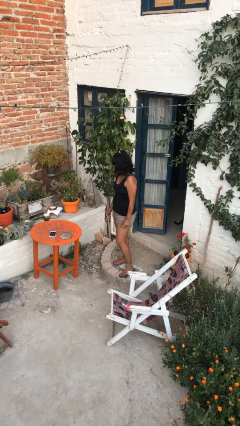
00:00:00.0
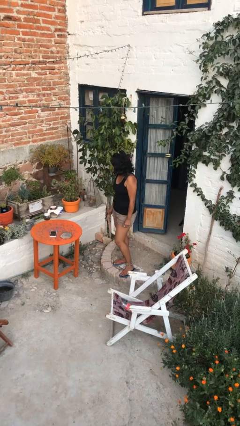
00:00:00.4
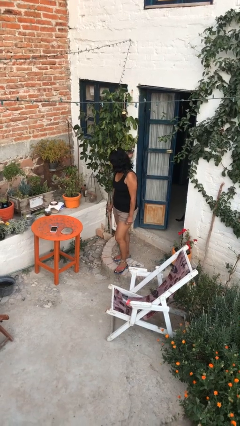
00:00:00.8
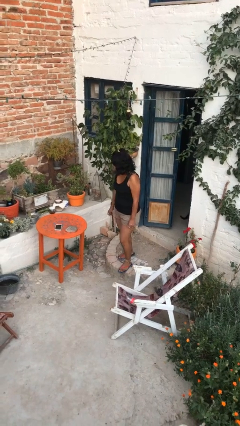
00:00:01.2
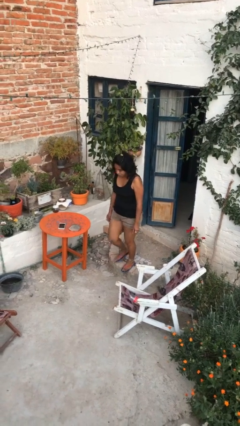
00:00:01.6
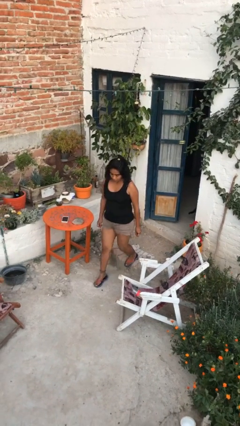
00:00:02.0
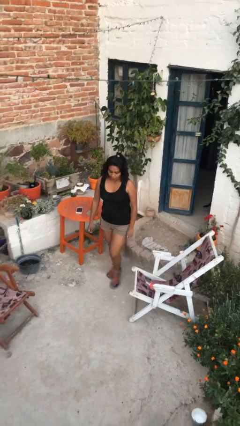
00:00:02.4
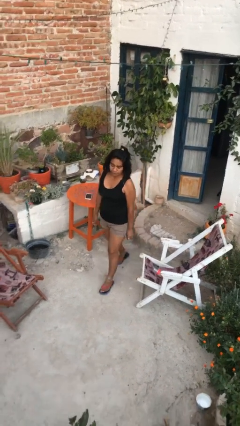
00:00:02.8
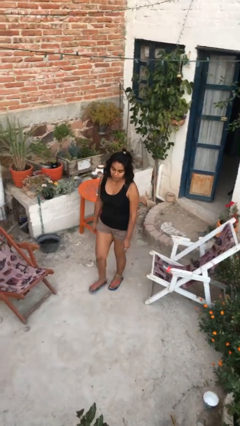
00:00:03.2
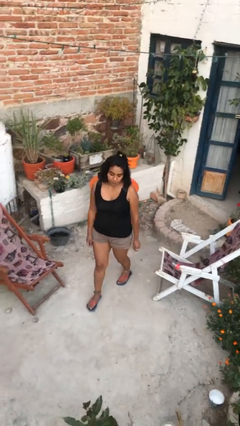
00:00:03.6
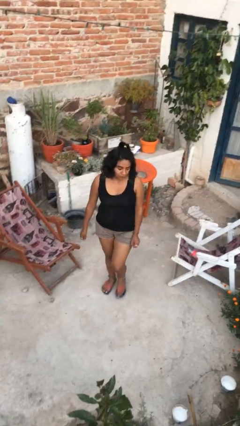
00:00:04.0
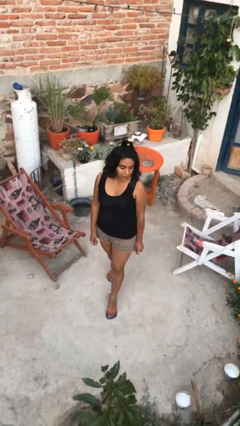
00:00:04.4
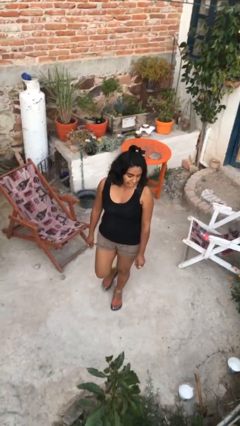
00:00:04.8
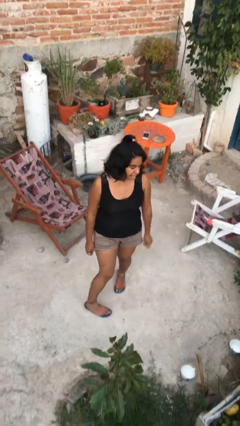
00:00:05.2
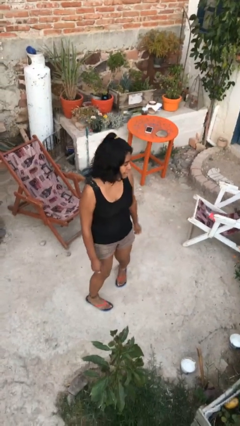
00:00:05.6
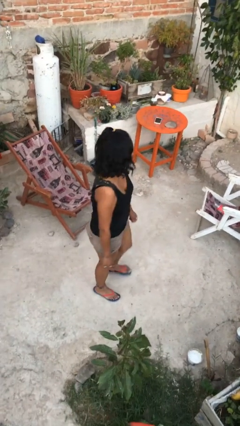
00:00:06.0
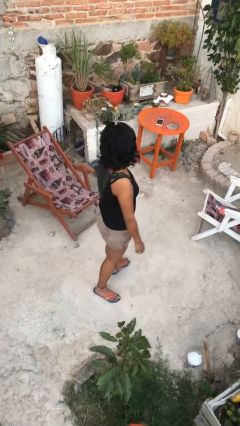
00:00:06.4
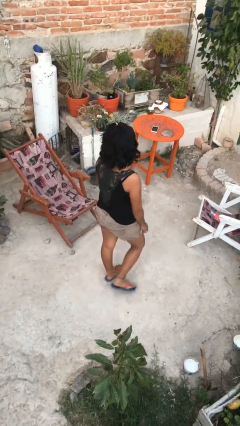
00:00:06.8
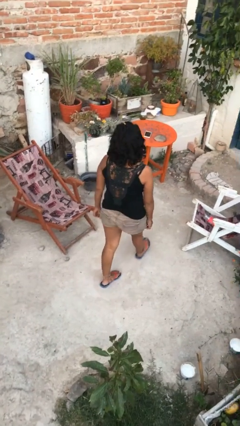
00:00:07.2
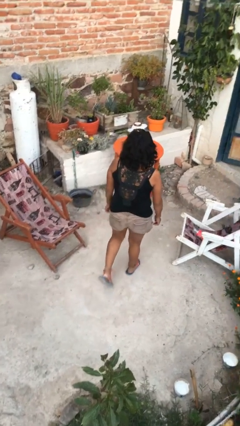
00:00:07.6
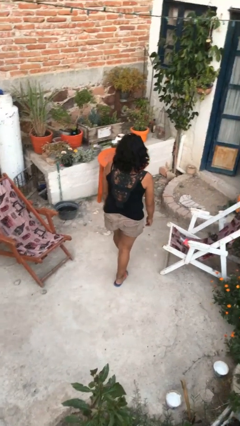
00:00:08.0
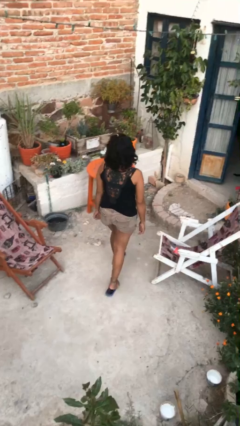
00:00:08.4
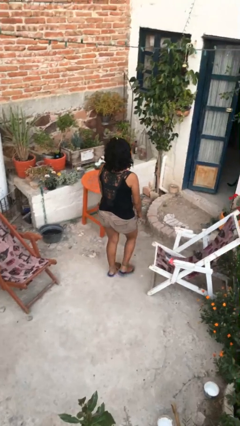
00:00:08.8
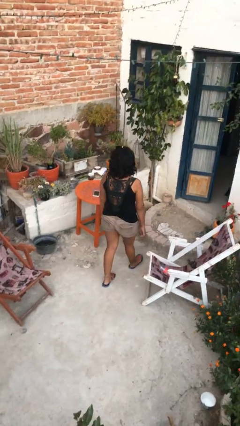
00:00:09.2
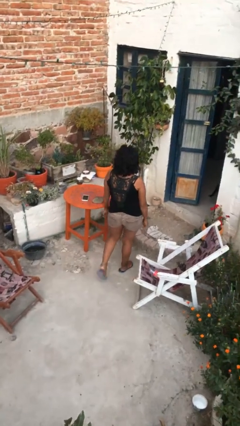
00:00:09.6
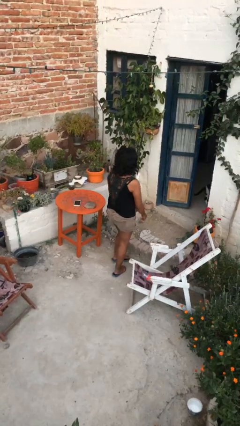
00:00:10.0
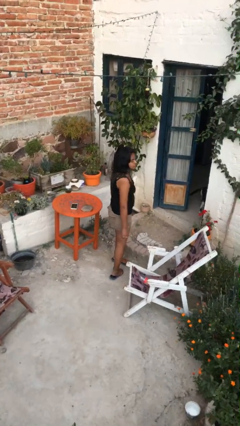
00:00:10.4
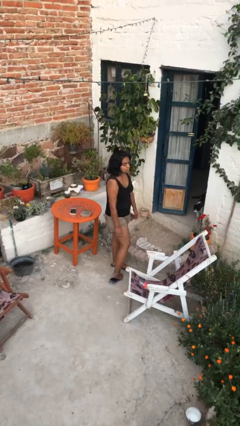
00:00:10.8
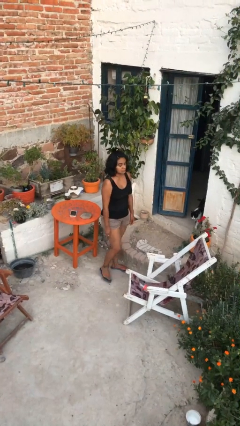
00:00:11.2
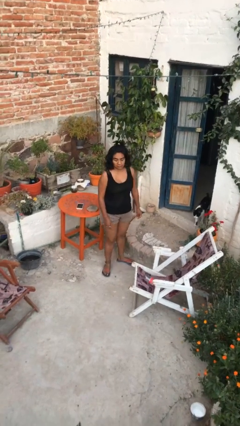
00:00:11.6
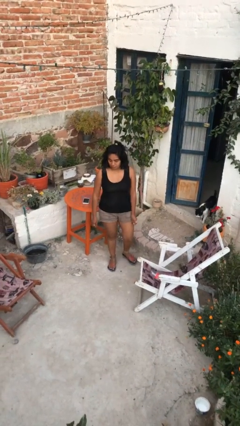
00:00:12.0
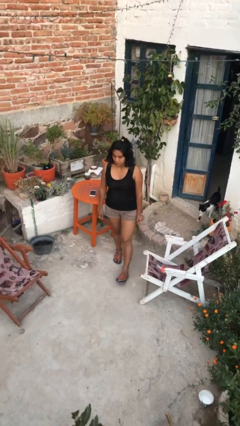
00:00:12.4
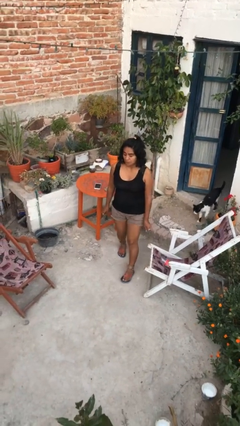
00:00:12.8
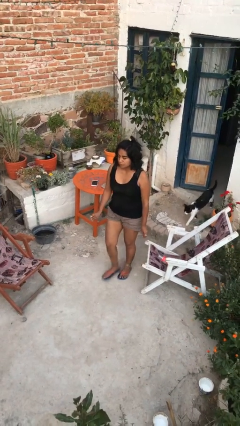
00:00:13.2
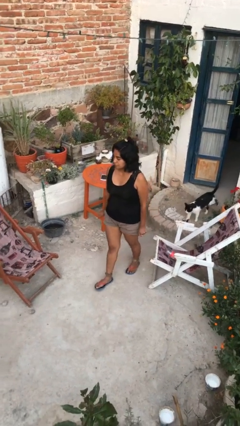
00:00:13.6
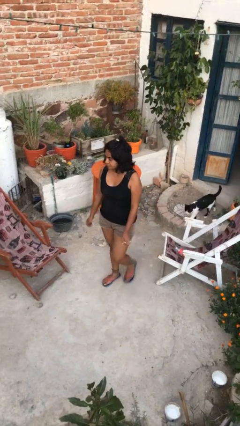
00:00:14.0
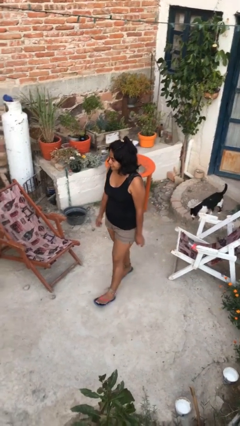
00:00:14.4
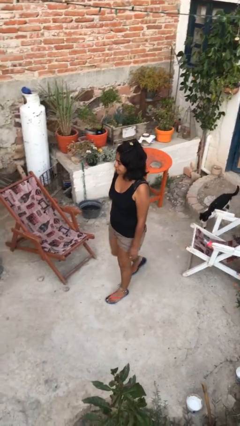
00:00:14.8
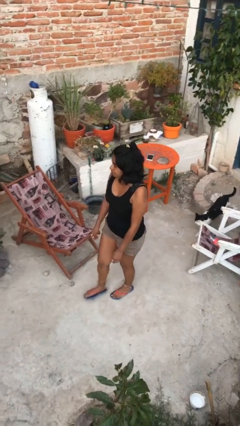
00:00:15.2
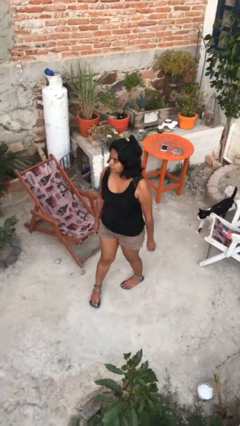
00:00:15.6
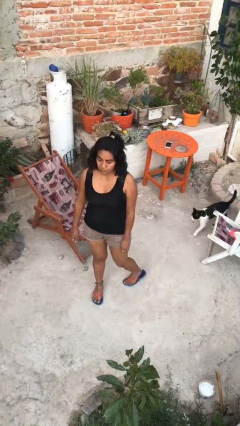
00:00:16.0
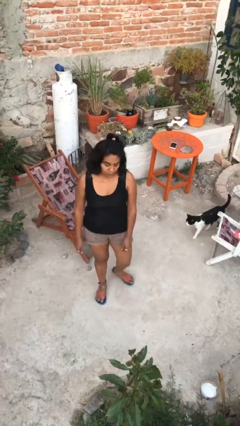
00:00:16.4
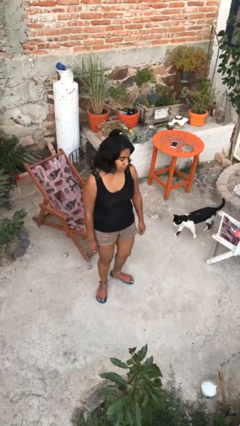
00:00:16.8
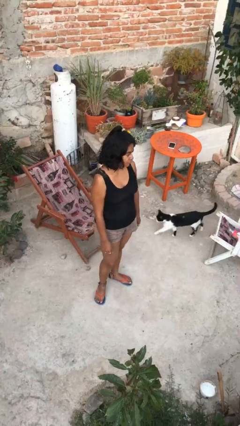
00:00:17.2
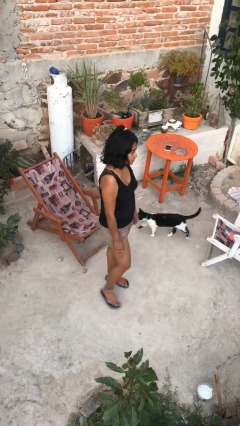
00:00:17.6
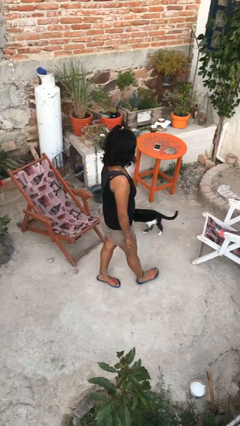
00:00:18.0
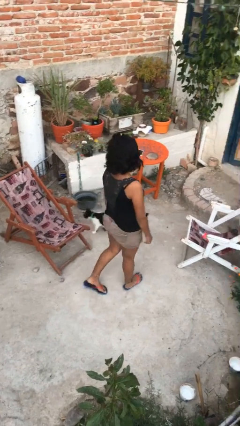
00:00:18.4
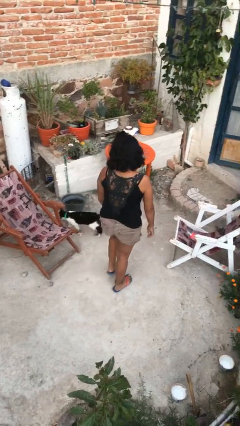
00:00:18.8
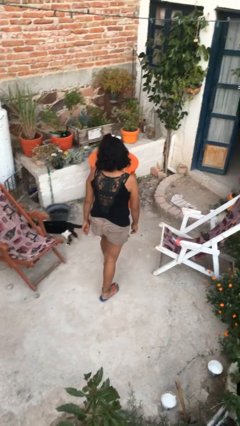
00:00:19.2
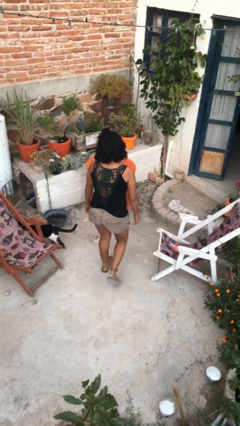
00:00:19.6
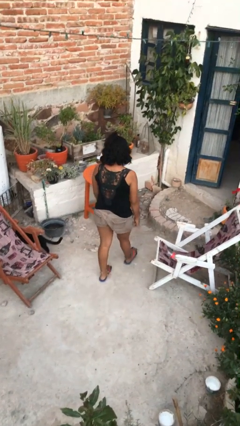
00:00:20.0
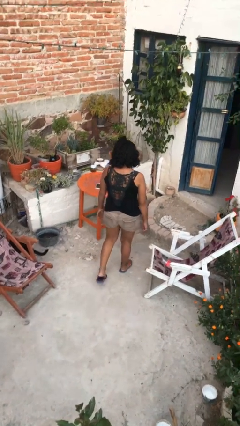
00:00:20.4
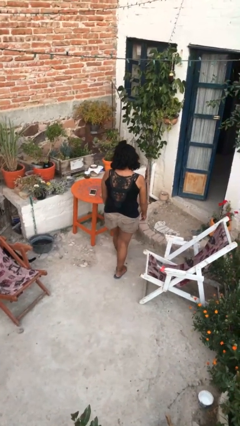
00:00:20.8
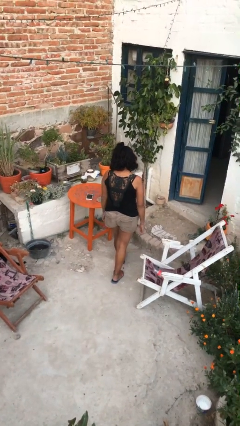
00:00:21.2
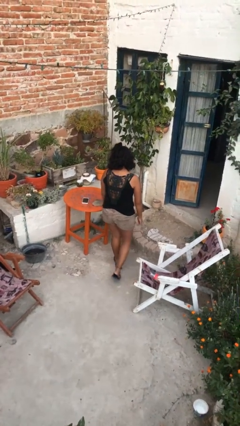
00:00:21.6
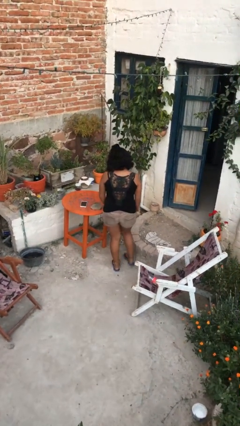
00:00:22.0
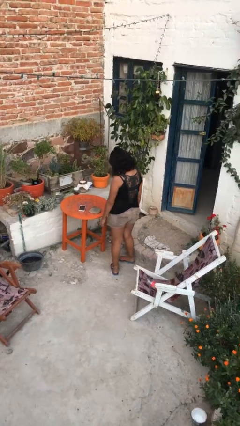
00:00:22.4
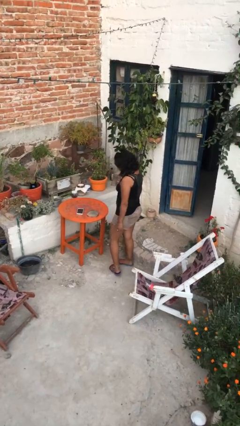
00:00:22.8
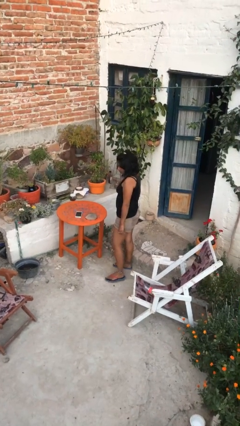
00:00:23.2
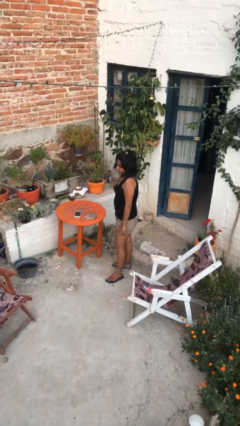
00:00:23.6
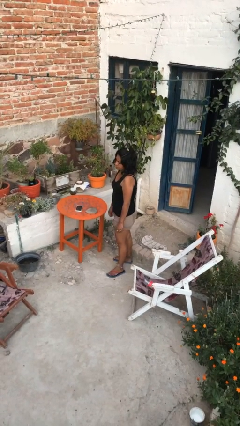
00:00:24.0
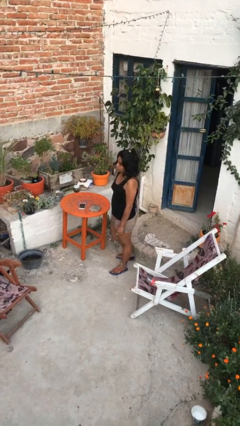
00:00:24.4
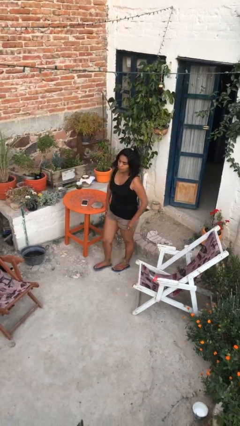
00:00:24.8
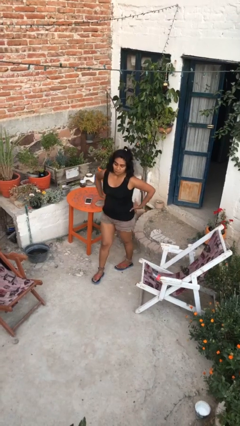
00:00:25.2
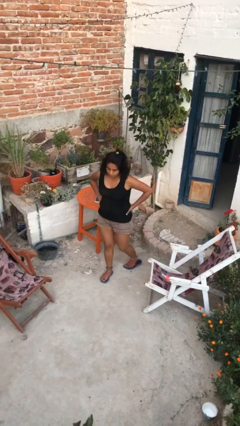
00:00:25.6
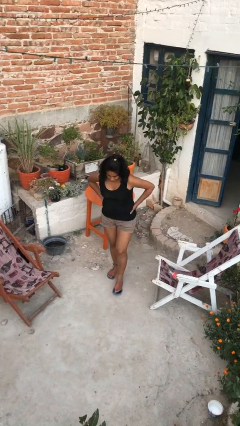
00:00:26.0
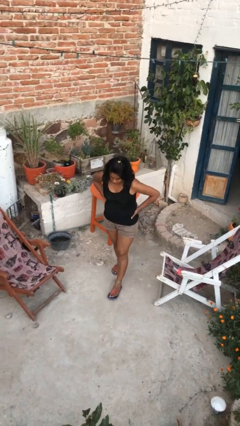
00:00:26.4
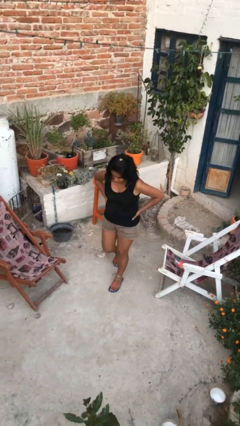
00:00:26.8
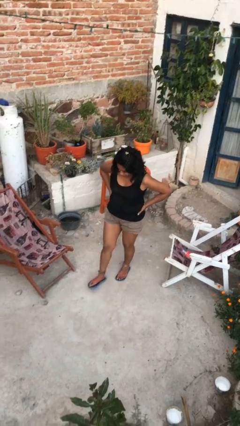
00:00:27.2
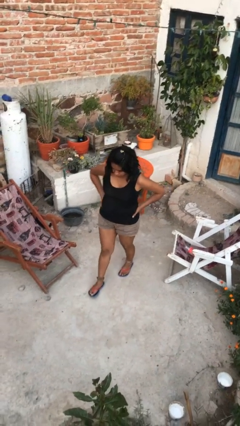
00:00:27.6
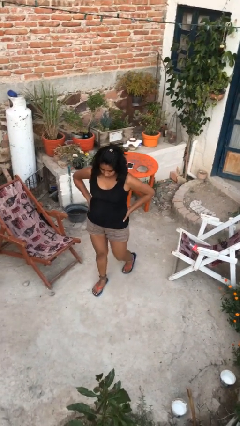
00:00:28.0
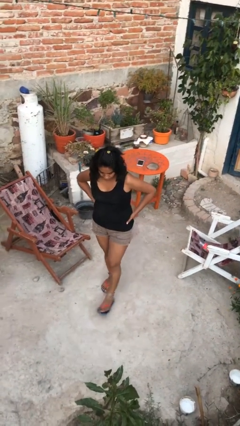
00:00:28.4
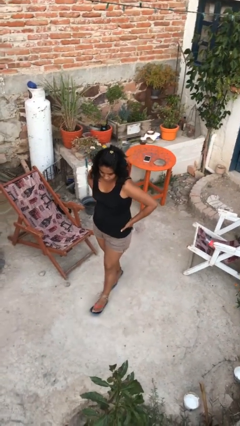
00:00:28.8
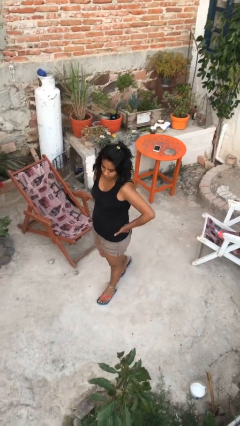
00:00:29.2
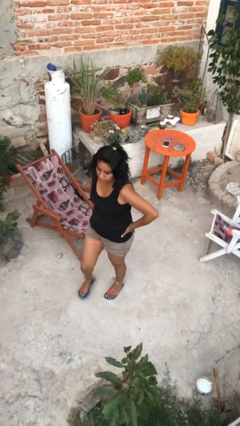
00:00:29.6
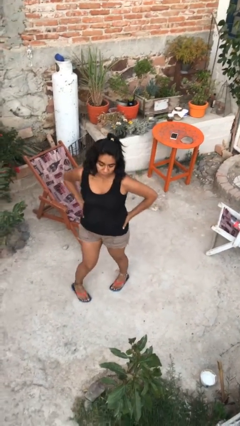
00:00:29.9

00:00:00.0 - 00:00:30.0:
person walks

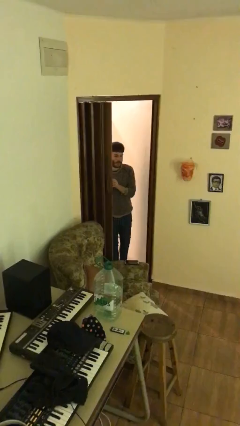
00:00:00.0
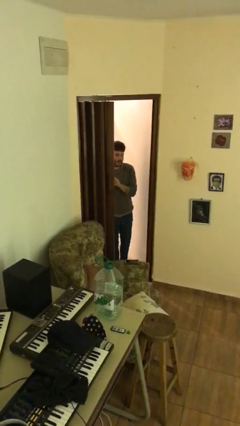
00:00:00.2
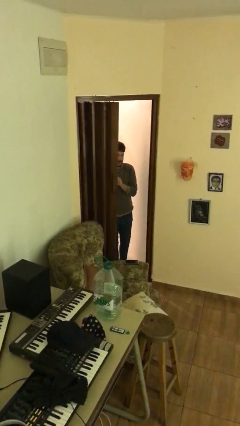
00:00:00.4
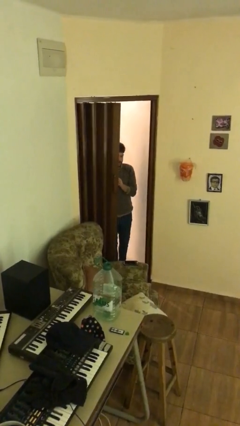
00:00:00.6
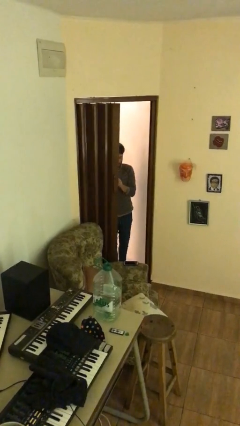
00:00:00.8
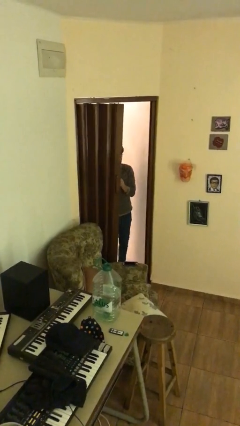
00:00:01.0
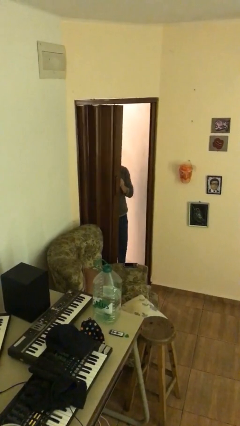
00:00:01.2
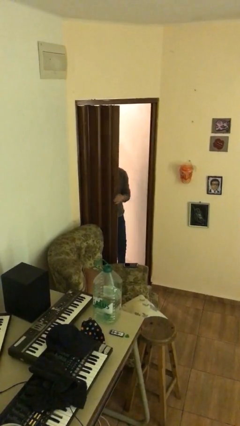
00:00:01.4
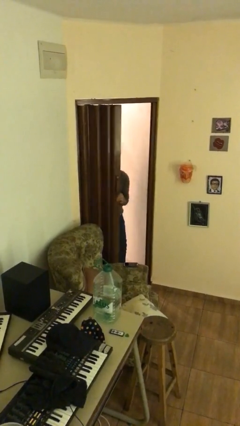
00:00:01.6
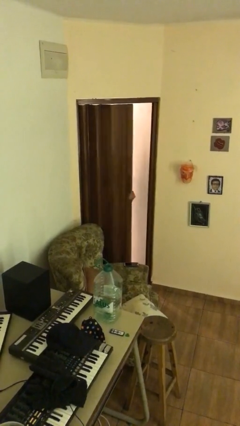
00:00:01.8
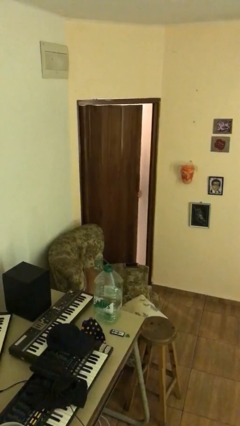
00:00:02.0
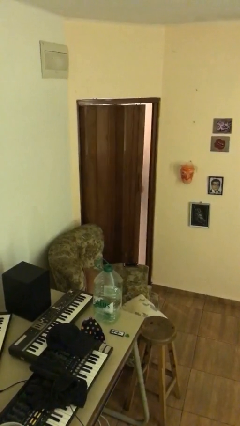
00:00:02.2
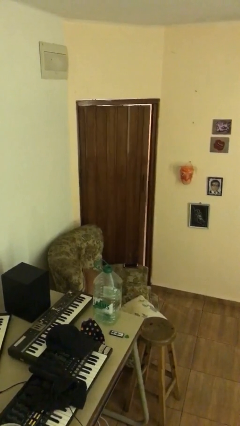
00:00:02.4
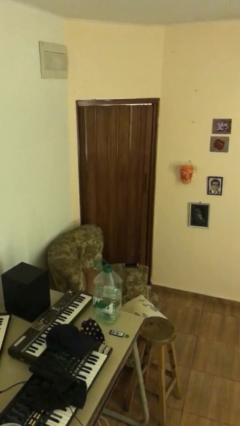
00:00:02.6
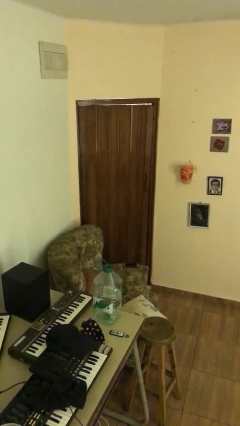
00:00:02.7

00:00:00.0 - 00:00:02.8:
person closes sliding door
